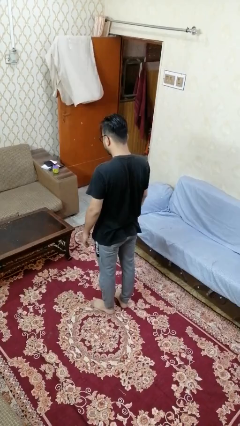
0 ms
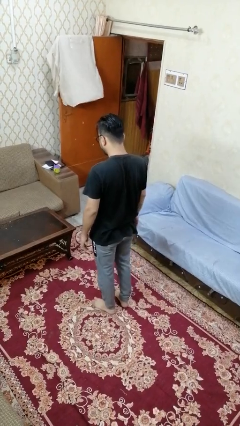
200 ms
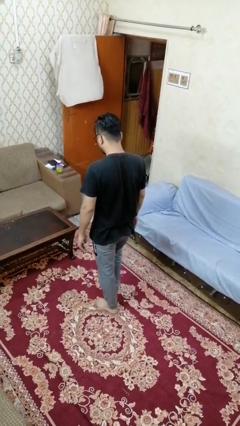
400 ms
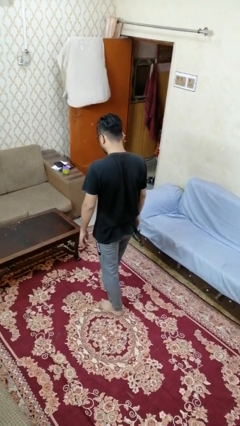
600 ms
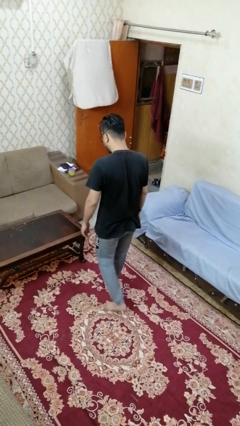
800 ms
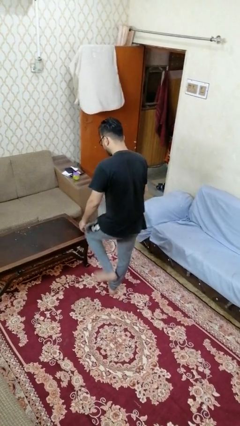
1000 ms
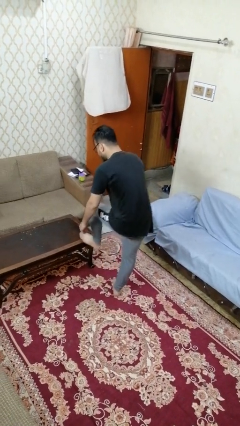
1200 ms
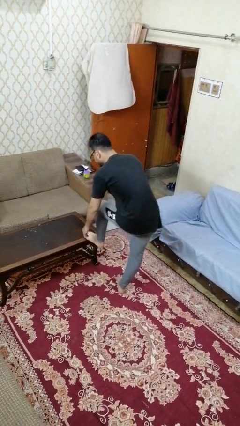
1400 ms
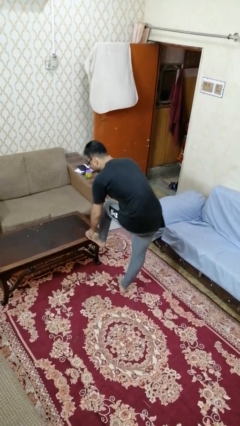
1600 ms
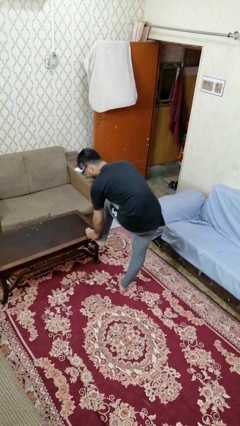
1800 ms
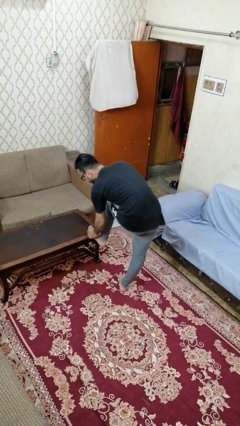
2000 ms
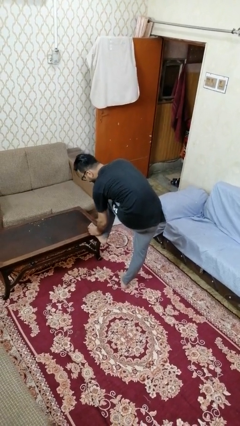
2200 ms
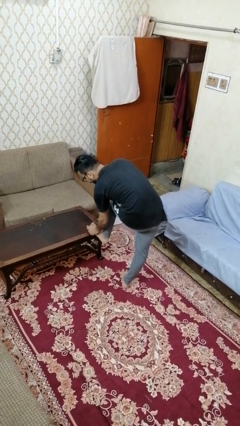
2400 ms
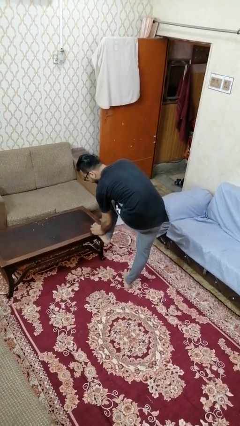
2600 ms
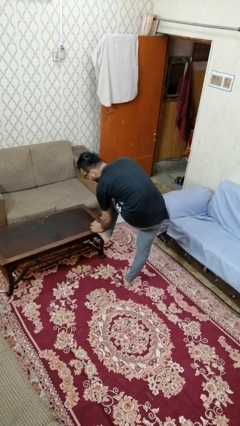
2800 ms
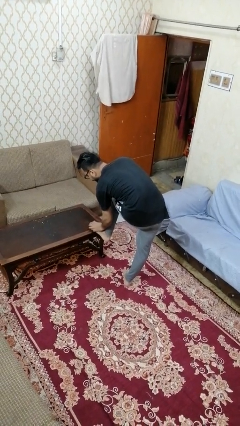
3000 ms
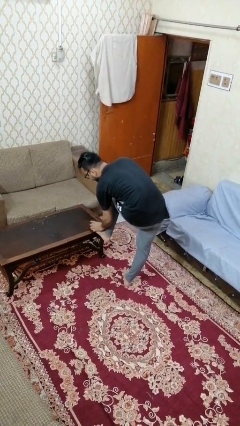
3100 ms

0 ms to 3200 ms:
person stubs toe

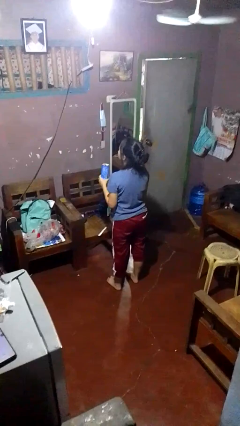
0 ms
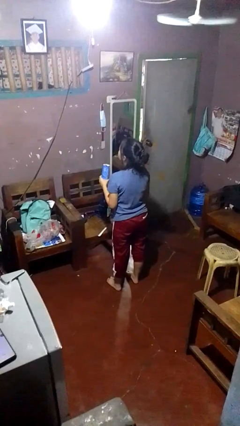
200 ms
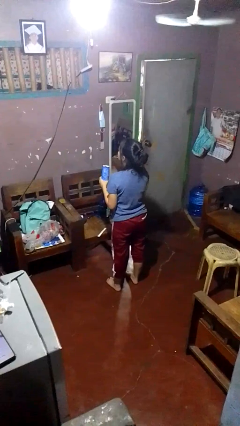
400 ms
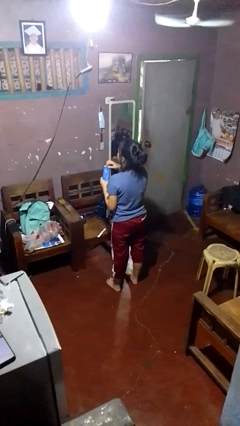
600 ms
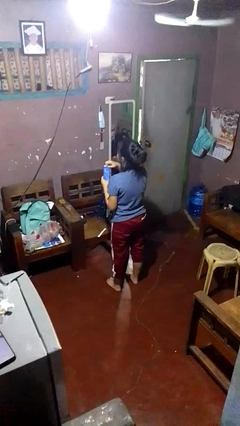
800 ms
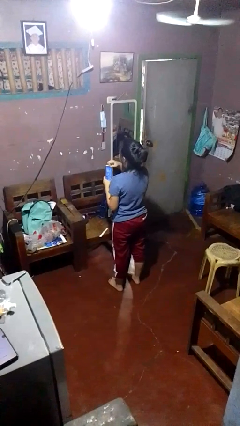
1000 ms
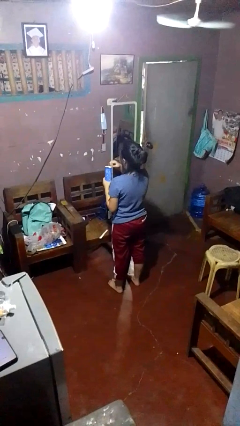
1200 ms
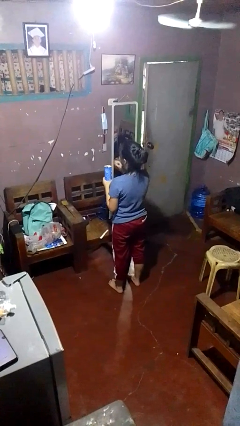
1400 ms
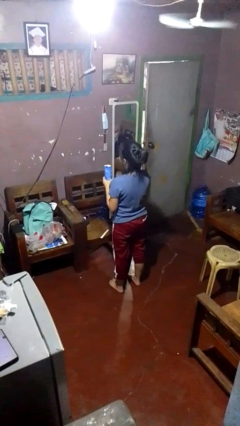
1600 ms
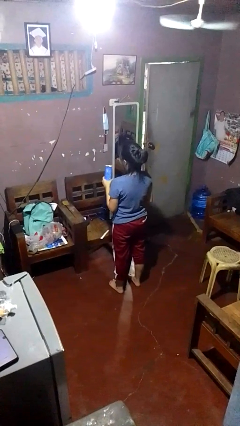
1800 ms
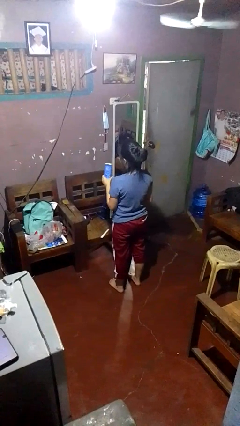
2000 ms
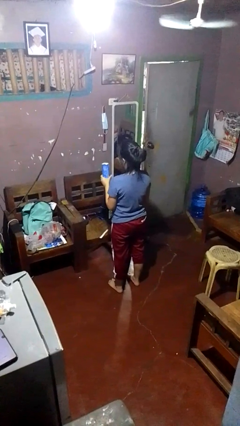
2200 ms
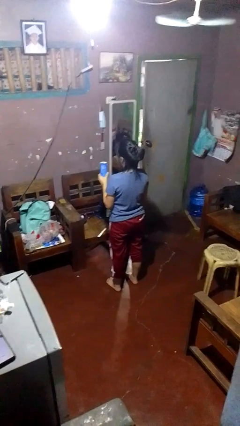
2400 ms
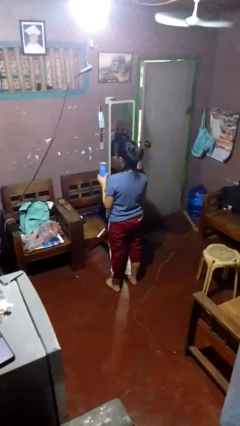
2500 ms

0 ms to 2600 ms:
person opens beverage can

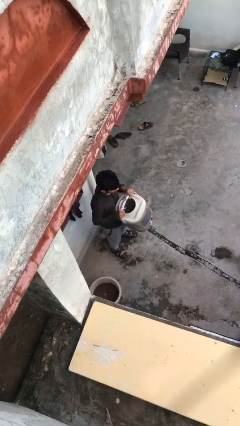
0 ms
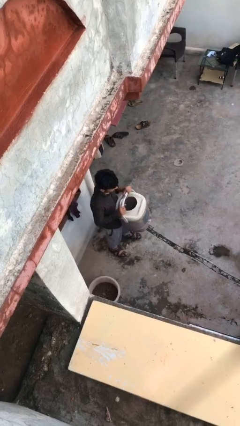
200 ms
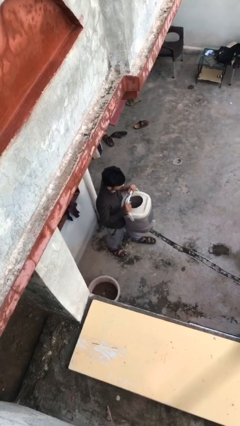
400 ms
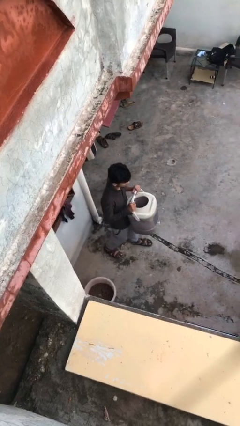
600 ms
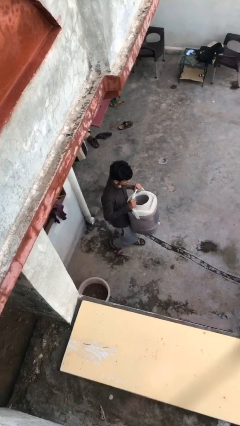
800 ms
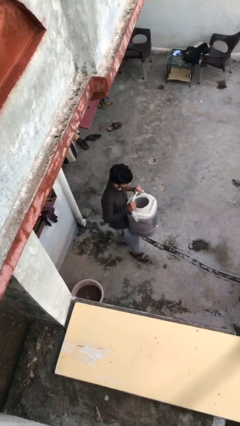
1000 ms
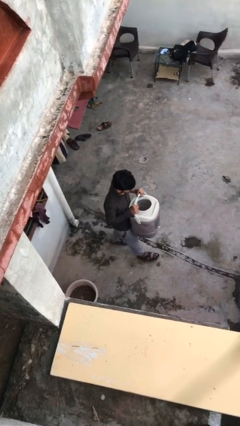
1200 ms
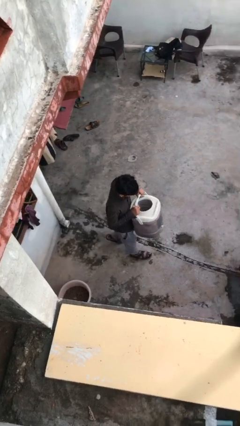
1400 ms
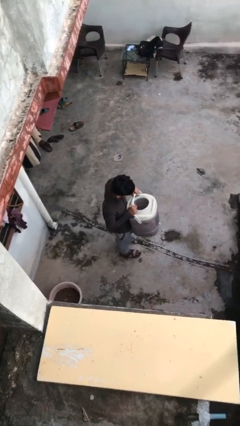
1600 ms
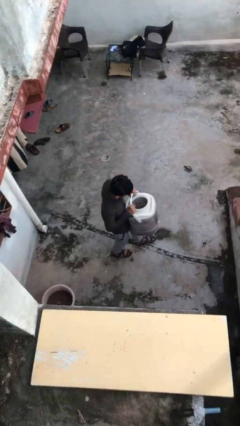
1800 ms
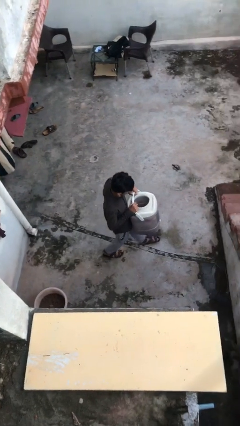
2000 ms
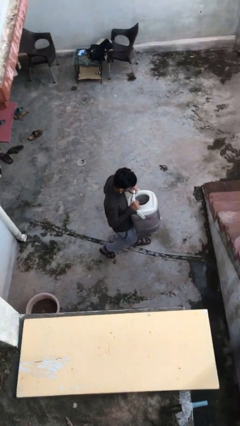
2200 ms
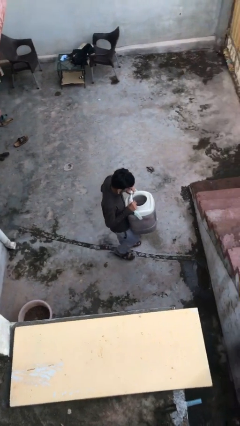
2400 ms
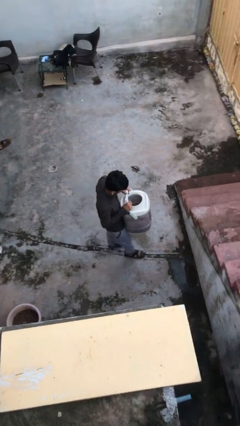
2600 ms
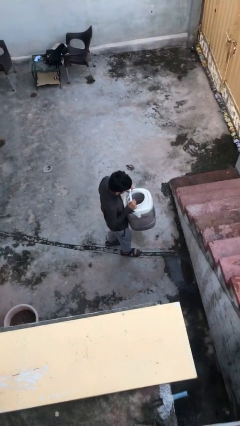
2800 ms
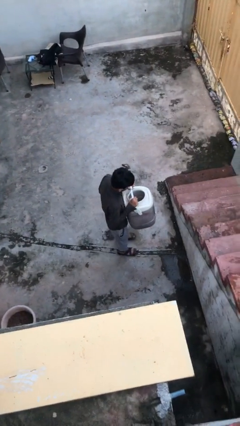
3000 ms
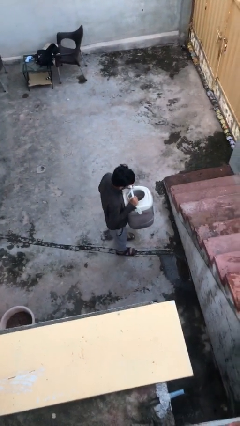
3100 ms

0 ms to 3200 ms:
person carries heavy object

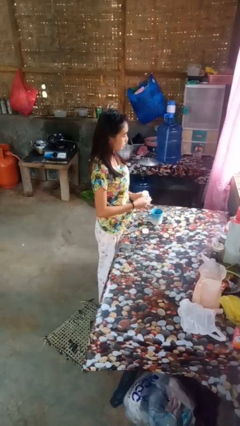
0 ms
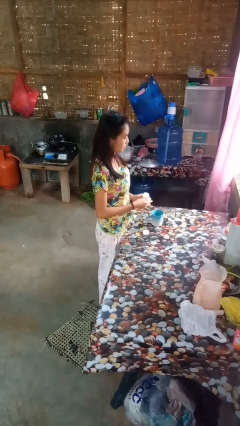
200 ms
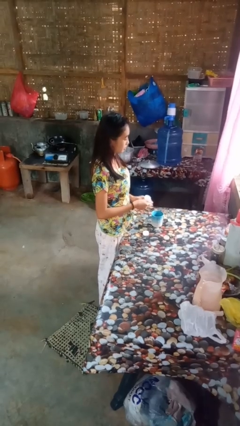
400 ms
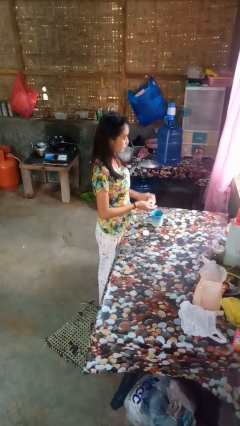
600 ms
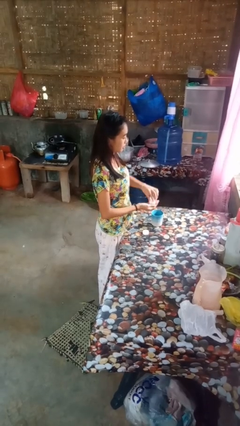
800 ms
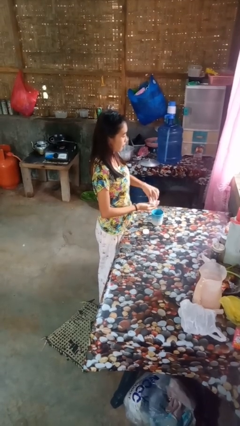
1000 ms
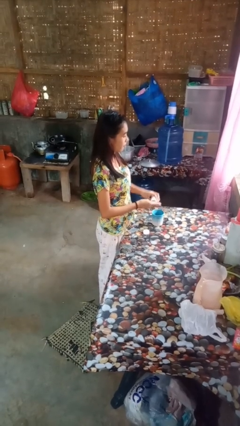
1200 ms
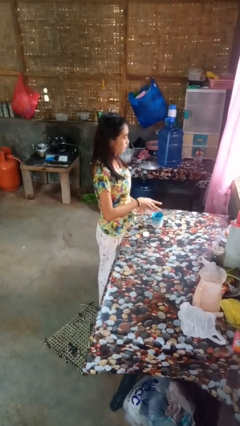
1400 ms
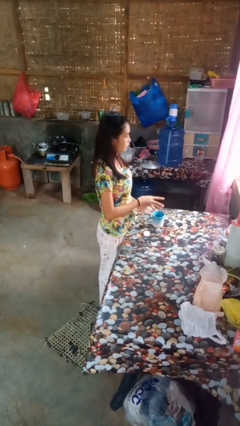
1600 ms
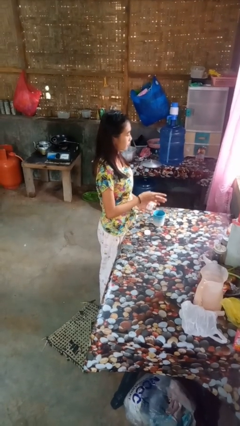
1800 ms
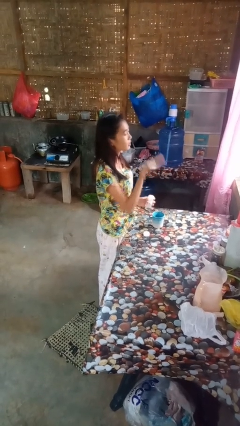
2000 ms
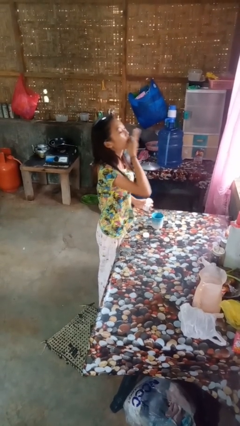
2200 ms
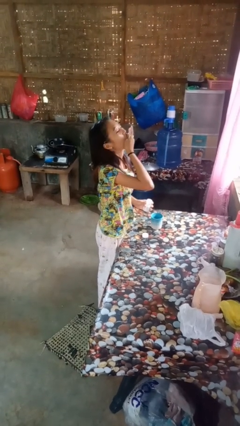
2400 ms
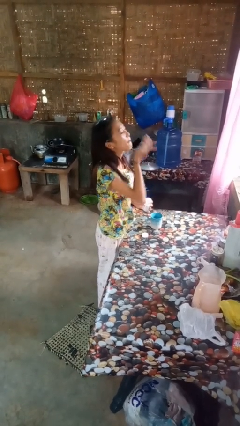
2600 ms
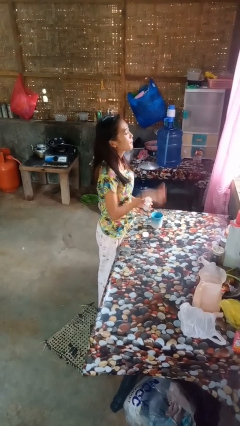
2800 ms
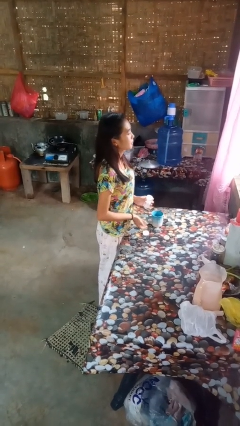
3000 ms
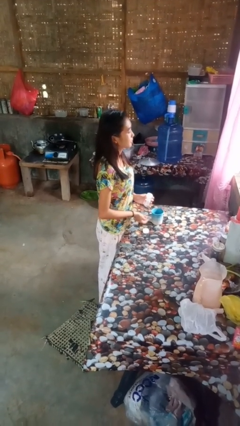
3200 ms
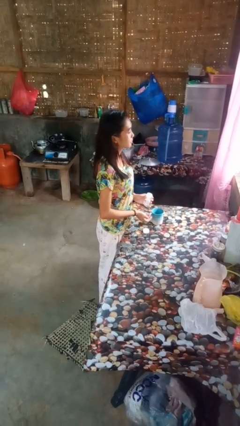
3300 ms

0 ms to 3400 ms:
person takes medicine pills

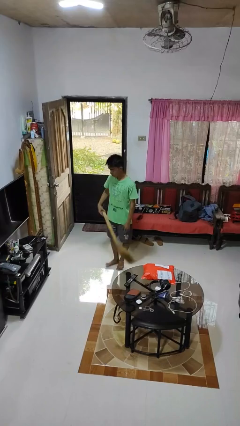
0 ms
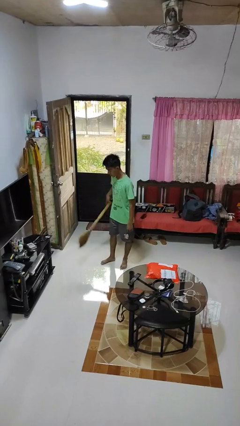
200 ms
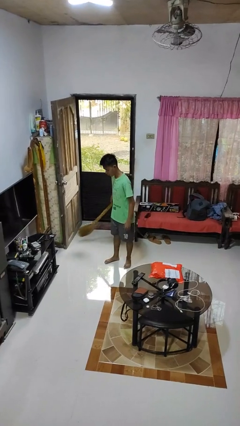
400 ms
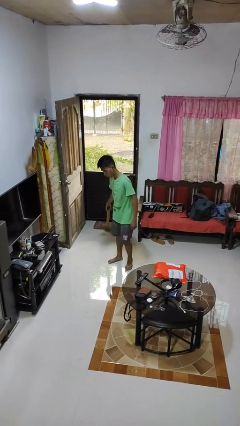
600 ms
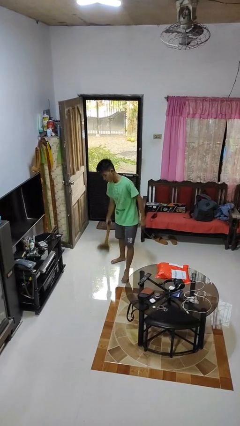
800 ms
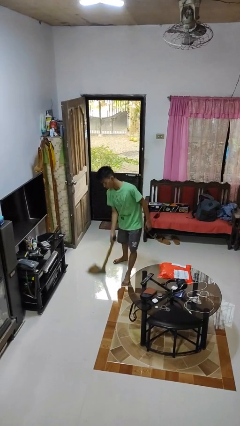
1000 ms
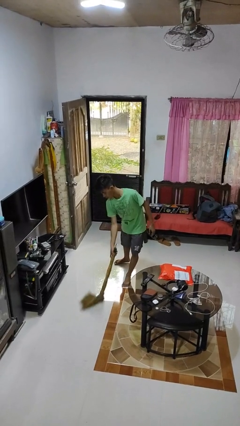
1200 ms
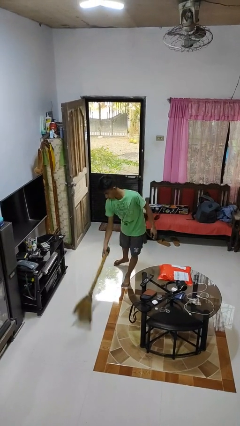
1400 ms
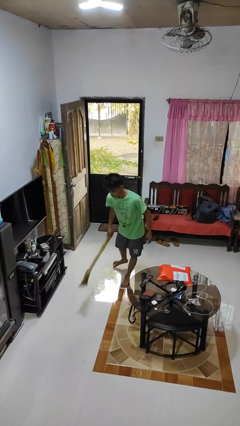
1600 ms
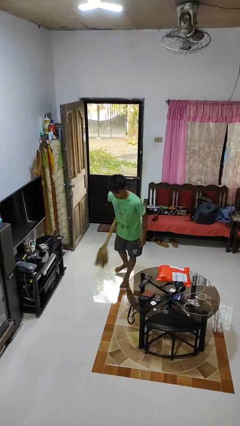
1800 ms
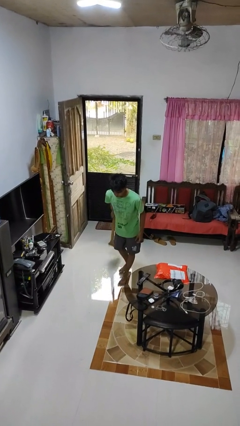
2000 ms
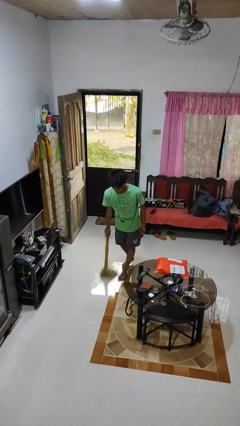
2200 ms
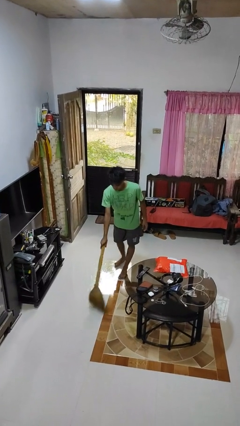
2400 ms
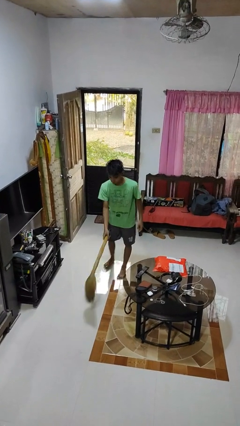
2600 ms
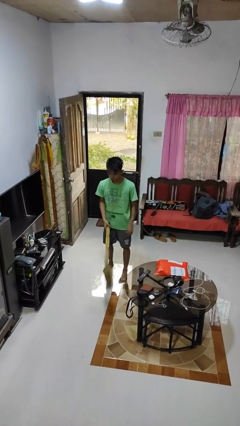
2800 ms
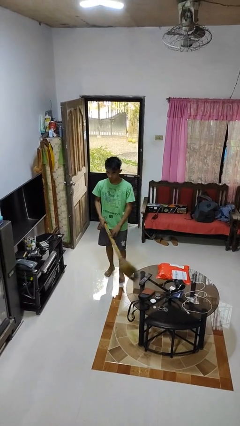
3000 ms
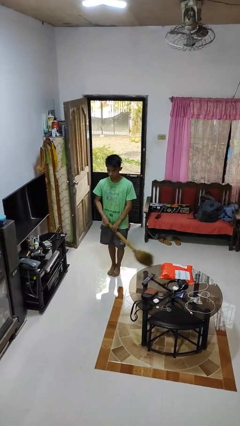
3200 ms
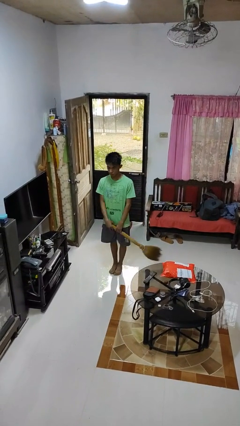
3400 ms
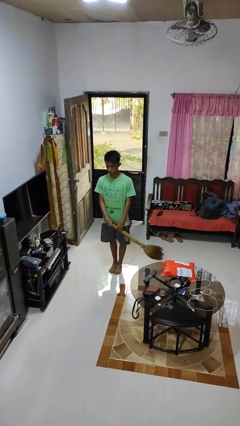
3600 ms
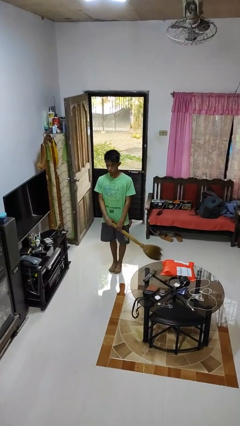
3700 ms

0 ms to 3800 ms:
person sweeps floor

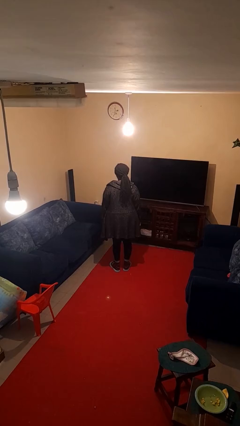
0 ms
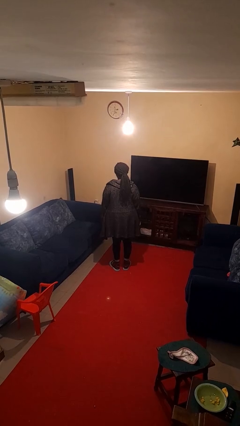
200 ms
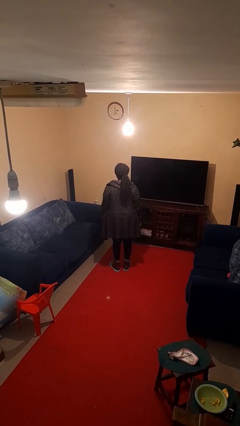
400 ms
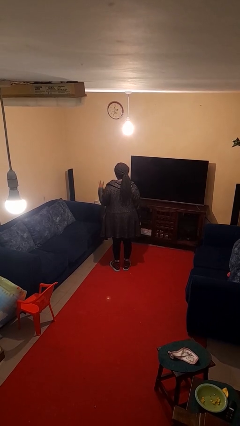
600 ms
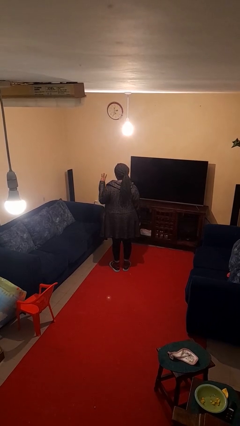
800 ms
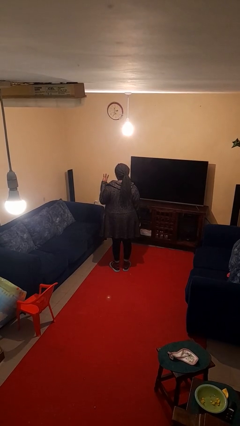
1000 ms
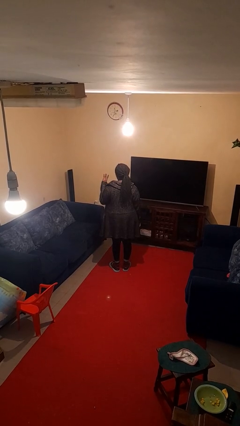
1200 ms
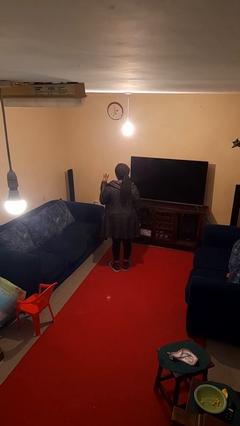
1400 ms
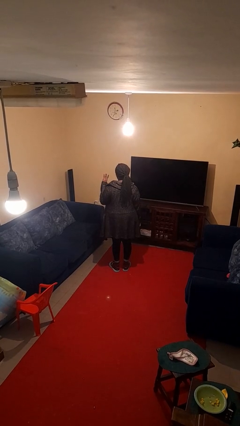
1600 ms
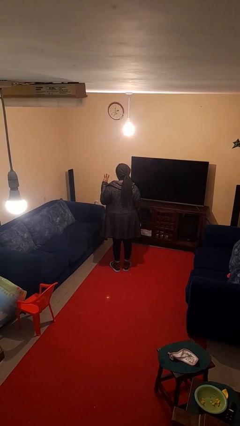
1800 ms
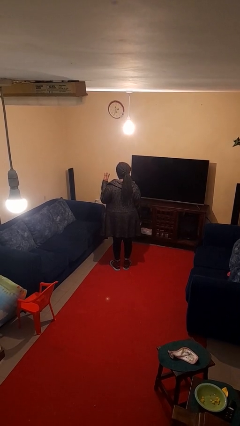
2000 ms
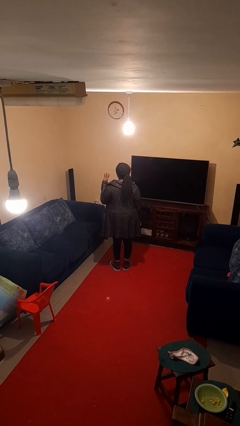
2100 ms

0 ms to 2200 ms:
person gestures number three
